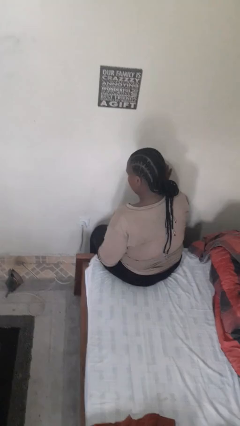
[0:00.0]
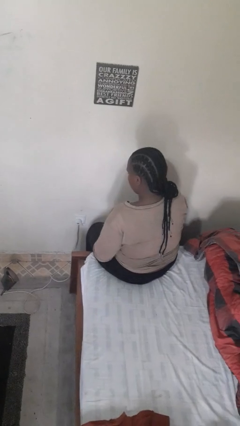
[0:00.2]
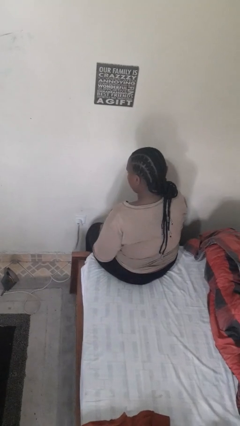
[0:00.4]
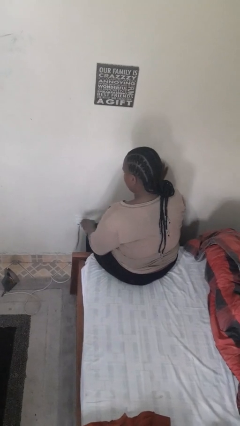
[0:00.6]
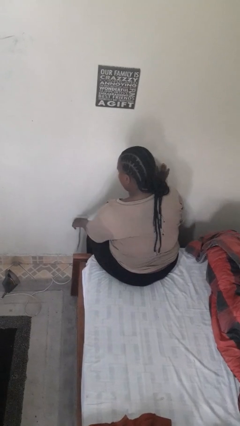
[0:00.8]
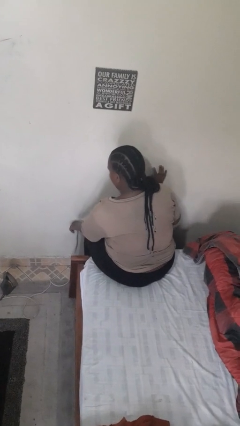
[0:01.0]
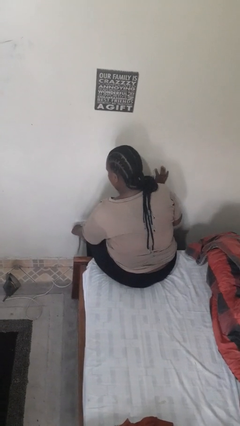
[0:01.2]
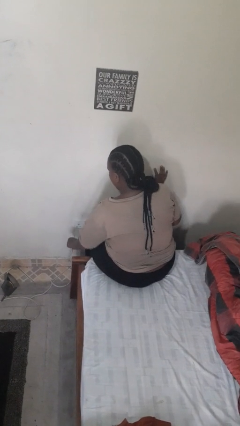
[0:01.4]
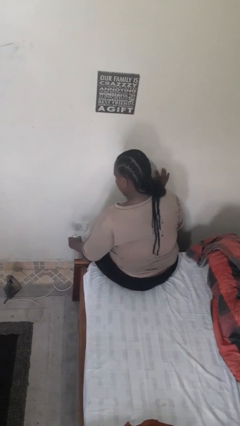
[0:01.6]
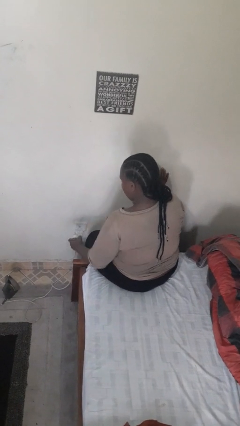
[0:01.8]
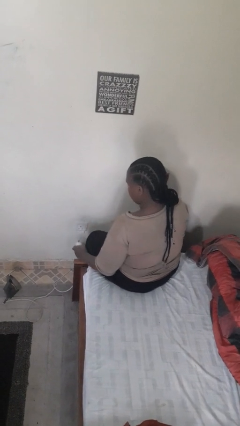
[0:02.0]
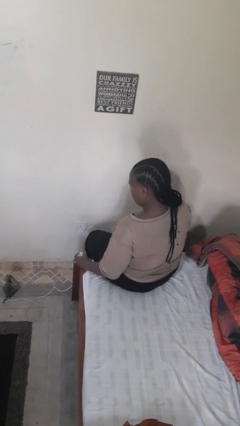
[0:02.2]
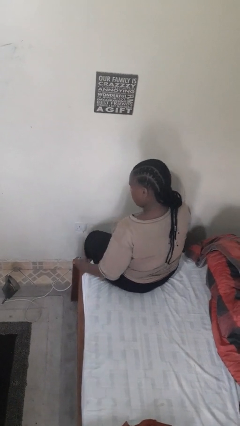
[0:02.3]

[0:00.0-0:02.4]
person unplugs from electrical socket

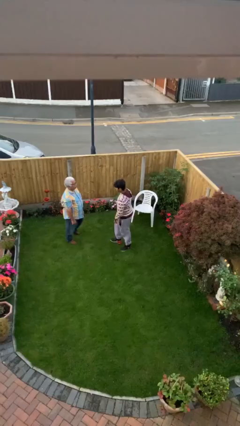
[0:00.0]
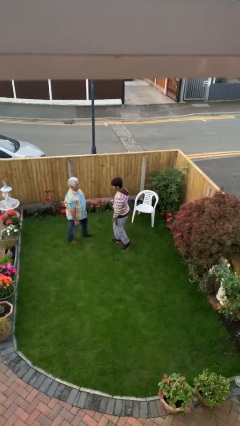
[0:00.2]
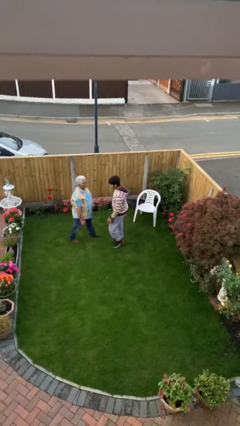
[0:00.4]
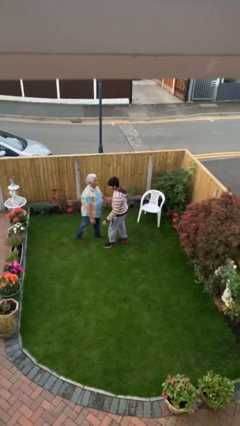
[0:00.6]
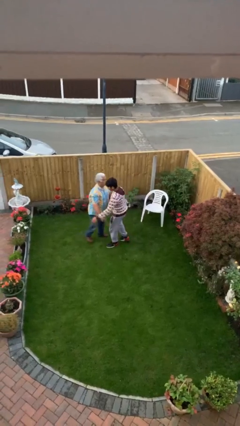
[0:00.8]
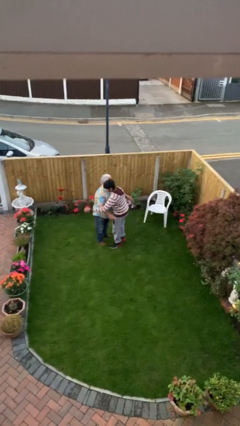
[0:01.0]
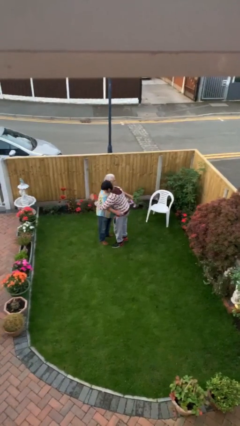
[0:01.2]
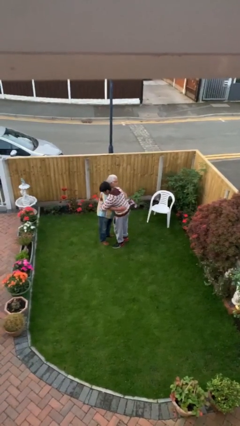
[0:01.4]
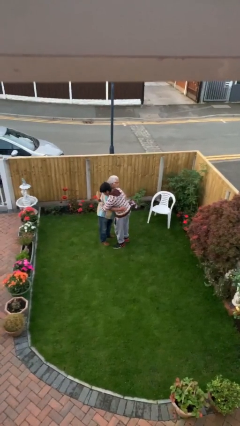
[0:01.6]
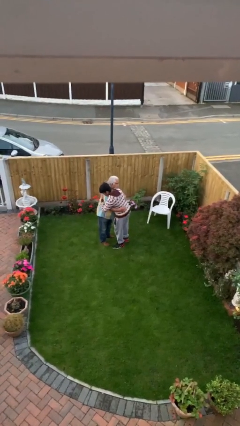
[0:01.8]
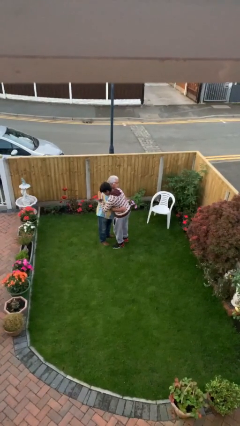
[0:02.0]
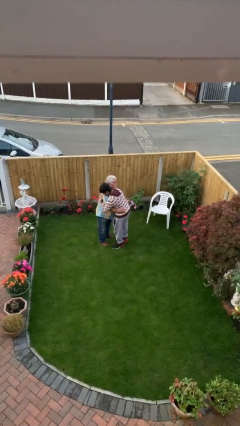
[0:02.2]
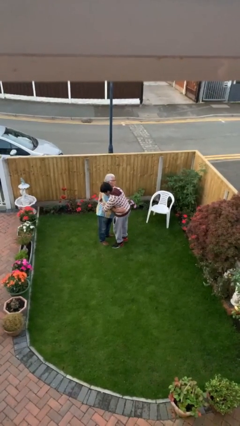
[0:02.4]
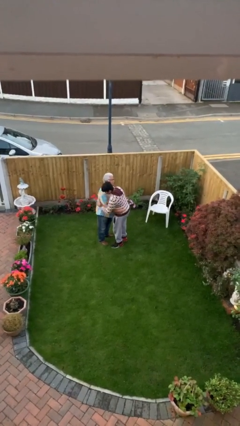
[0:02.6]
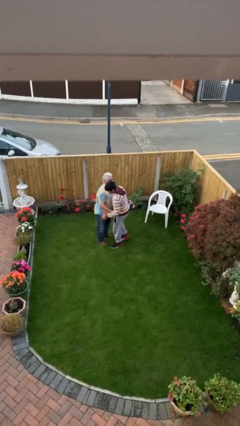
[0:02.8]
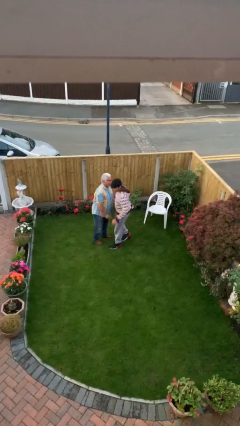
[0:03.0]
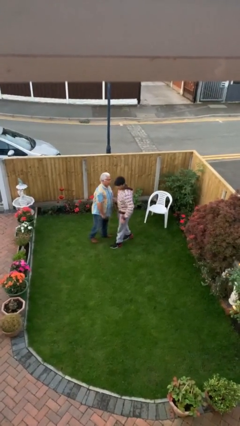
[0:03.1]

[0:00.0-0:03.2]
person embraces person

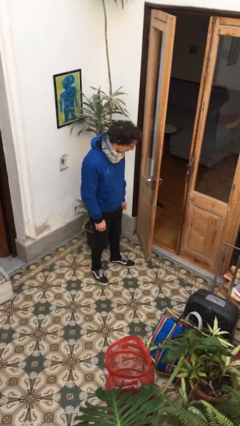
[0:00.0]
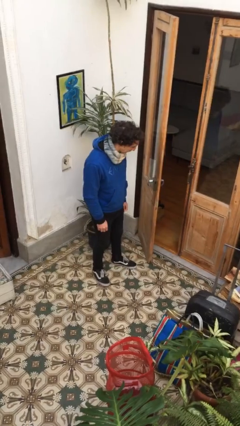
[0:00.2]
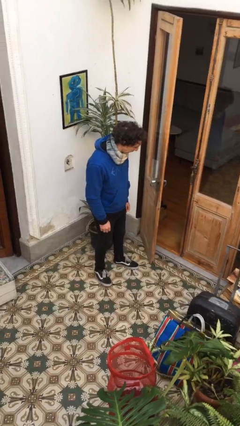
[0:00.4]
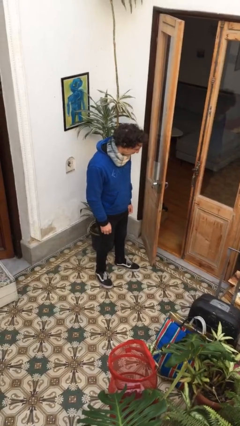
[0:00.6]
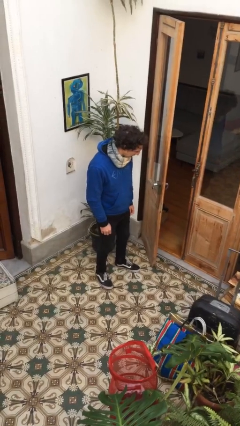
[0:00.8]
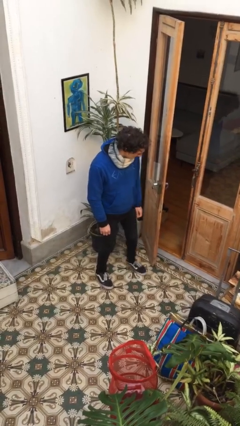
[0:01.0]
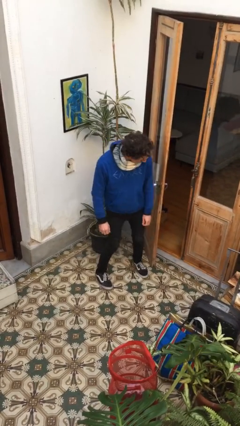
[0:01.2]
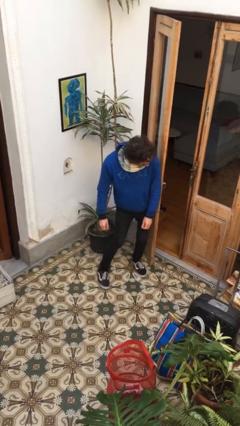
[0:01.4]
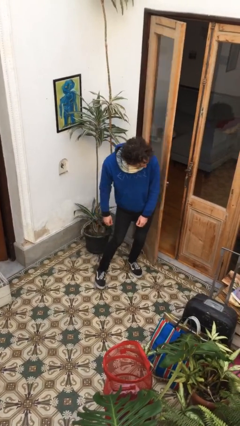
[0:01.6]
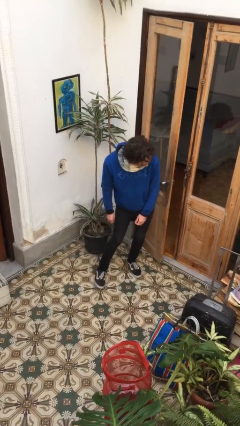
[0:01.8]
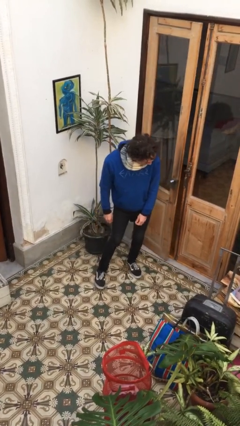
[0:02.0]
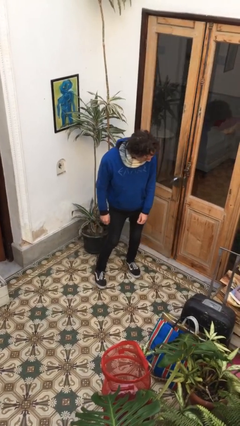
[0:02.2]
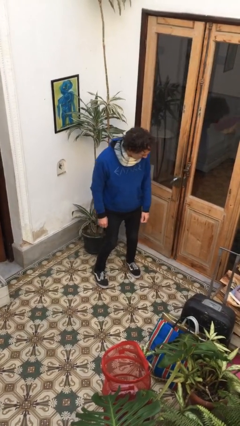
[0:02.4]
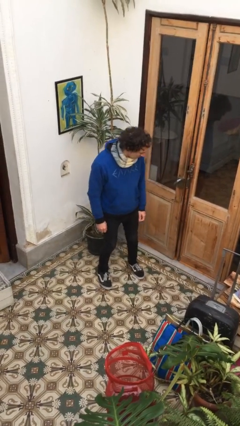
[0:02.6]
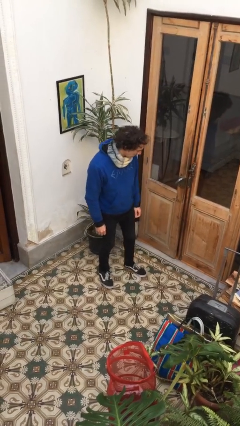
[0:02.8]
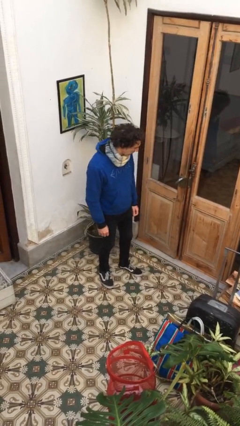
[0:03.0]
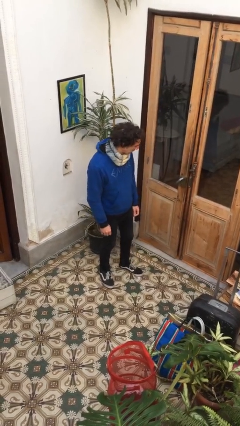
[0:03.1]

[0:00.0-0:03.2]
person closes door with hip

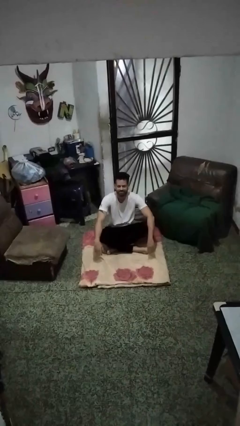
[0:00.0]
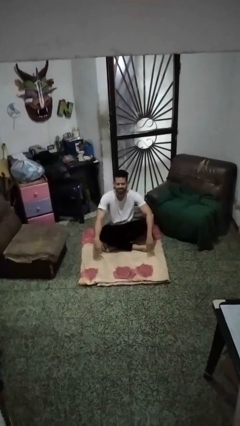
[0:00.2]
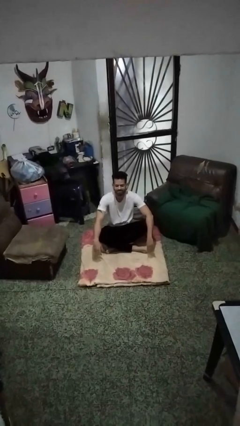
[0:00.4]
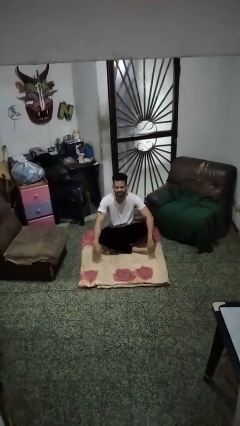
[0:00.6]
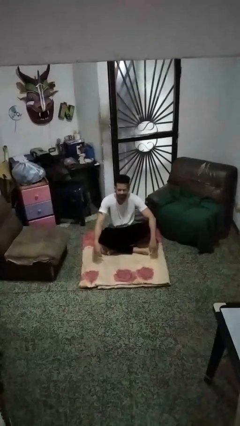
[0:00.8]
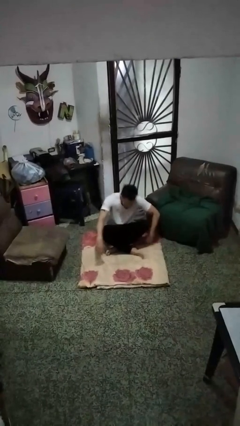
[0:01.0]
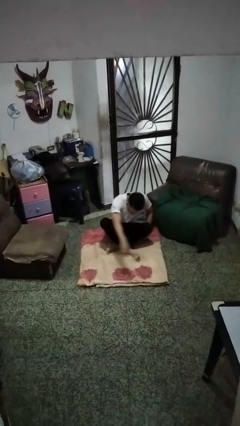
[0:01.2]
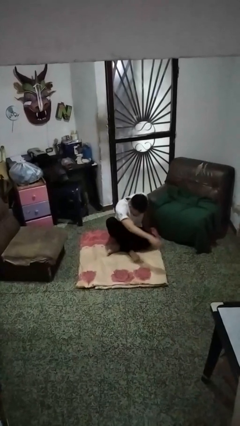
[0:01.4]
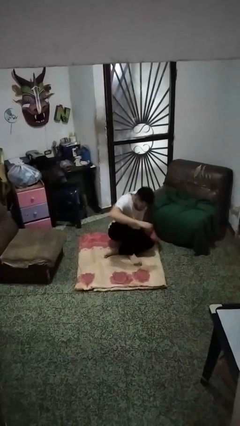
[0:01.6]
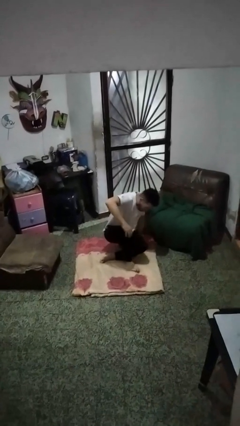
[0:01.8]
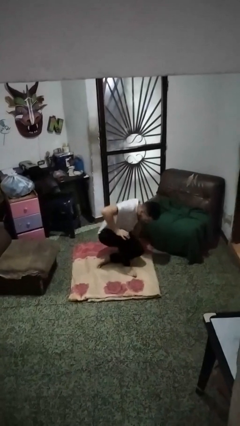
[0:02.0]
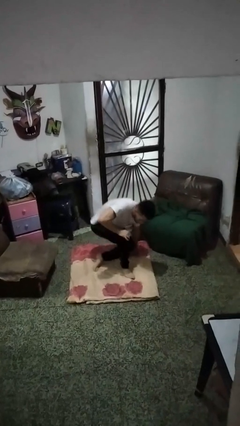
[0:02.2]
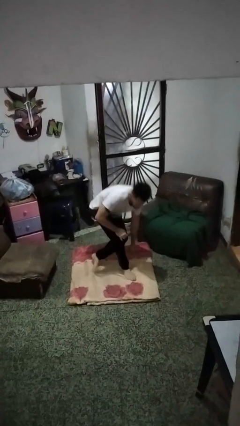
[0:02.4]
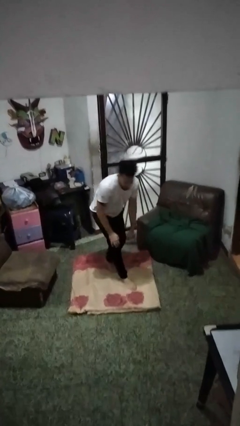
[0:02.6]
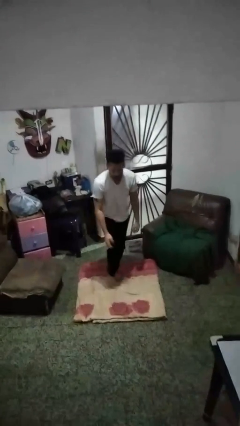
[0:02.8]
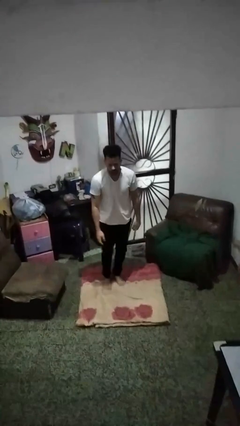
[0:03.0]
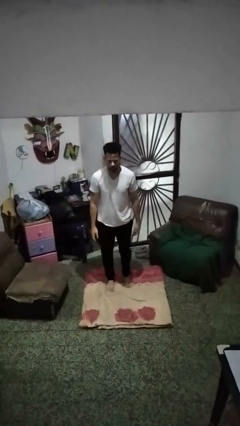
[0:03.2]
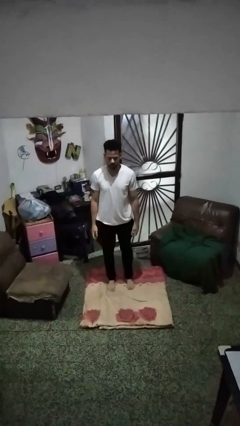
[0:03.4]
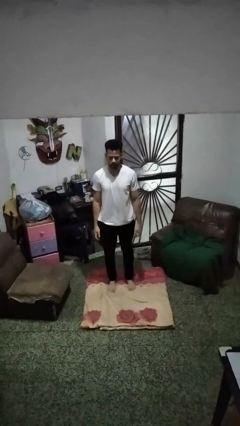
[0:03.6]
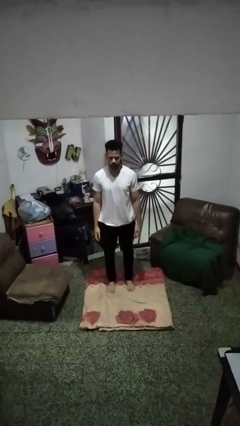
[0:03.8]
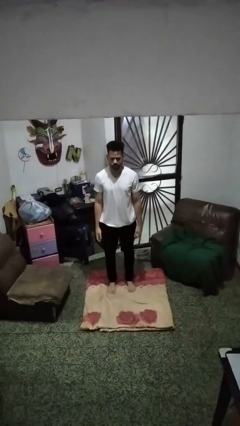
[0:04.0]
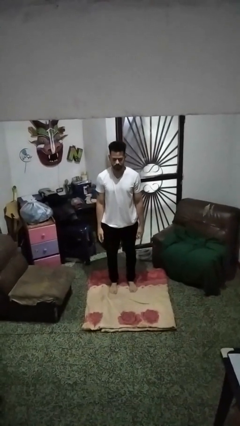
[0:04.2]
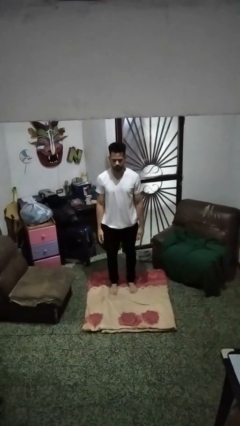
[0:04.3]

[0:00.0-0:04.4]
person stands up from floor

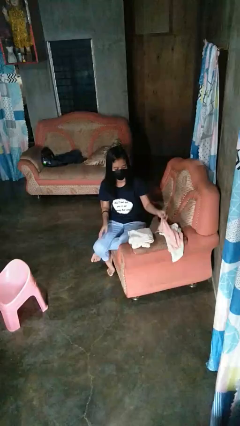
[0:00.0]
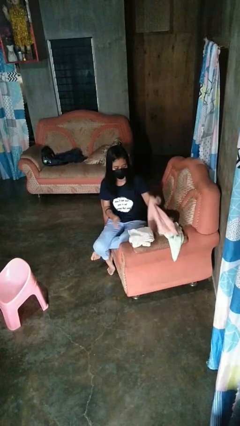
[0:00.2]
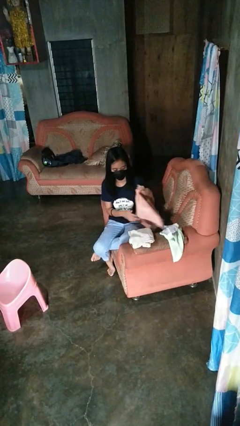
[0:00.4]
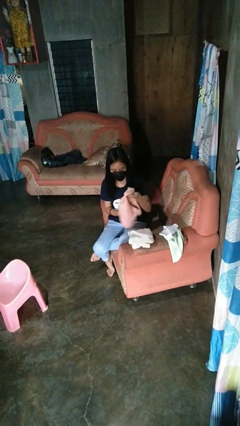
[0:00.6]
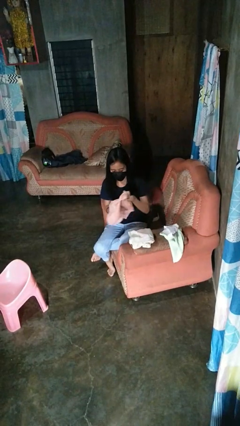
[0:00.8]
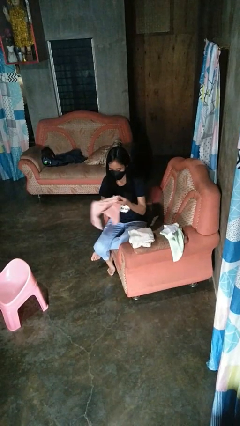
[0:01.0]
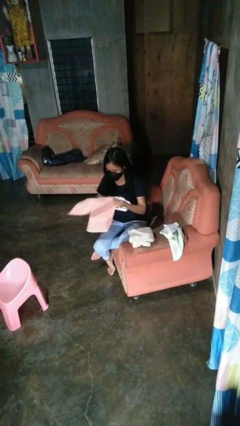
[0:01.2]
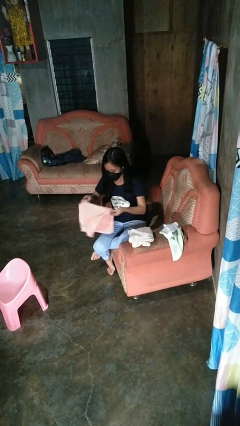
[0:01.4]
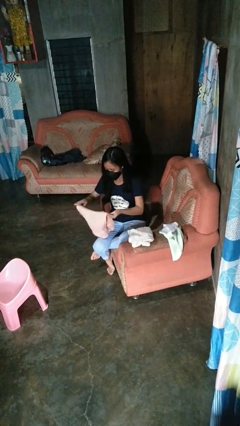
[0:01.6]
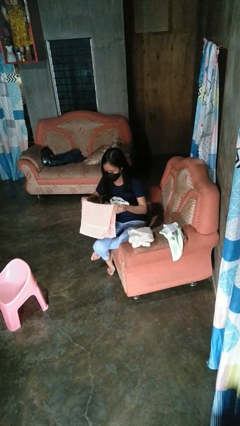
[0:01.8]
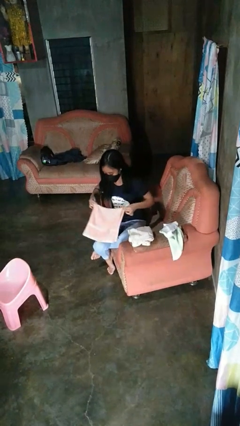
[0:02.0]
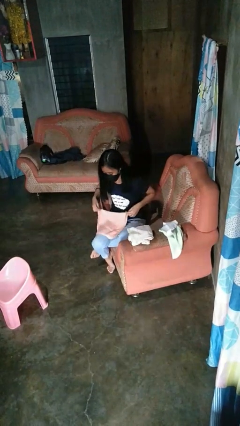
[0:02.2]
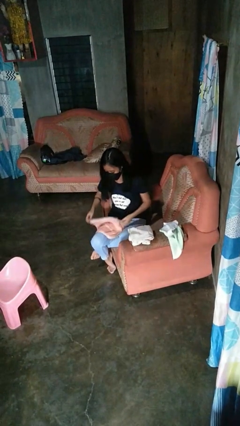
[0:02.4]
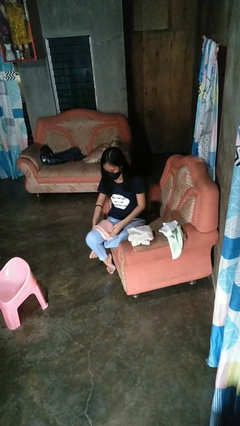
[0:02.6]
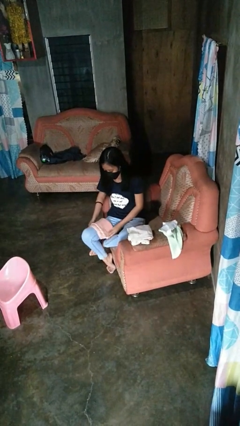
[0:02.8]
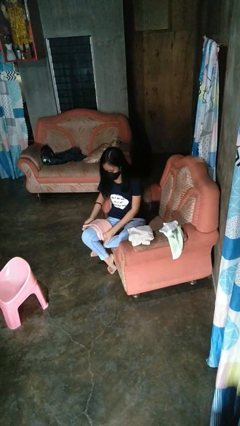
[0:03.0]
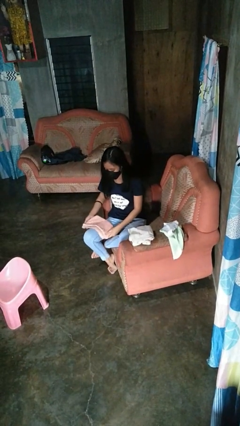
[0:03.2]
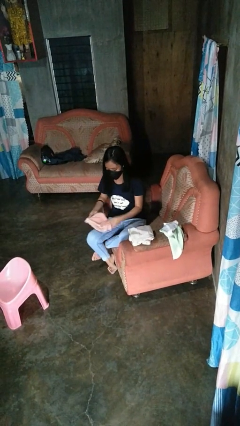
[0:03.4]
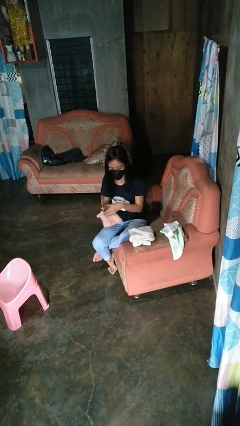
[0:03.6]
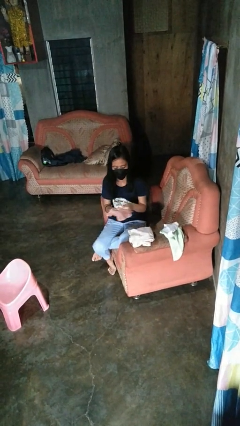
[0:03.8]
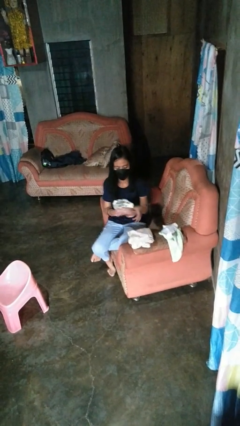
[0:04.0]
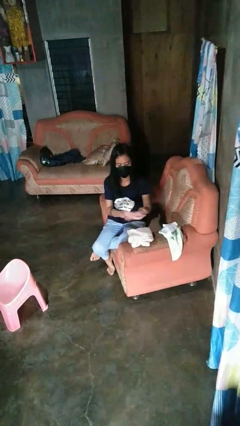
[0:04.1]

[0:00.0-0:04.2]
person folds towel

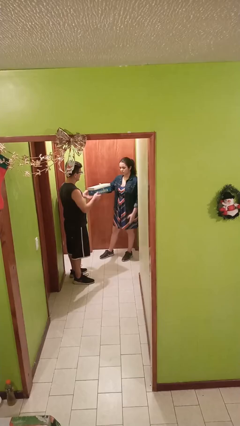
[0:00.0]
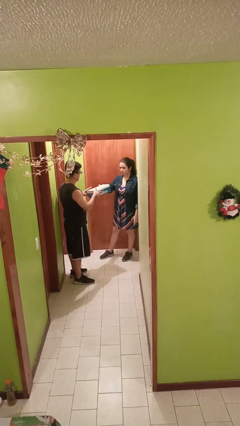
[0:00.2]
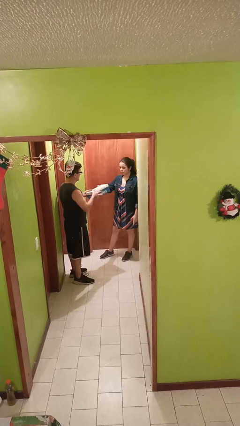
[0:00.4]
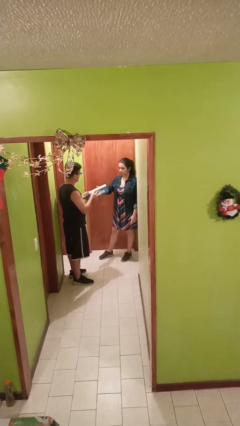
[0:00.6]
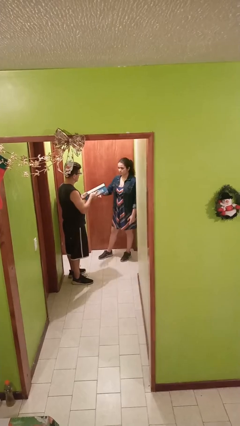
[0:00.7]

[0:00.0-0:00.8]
person transfers object to person
